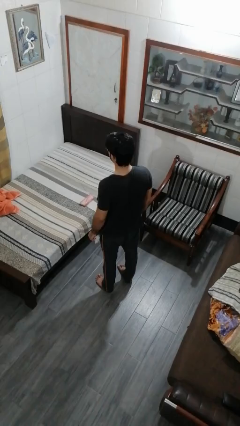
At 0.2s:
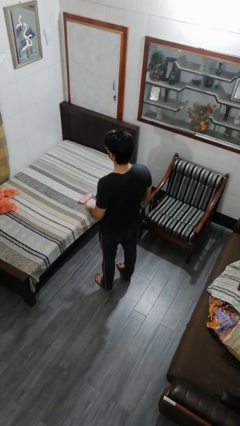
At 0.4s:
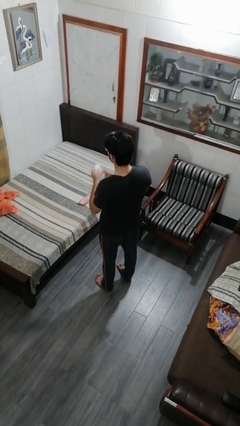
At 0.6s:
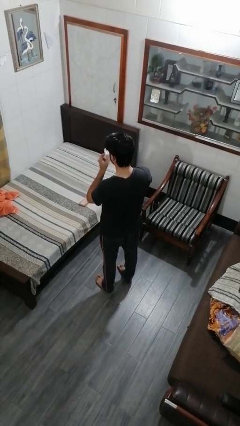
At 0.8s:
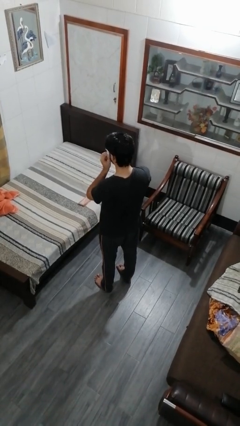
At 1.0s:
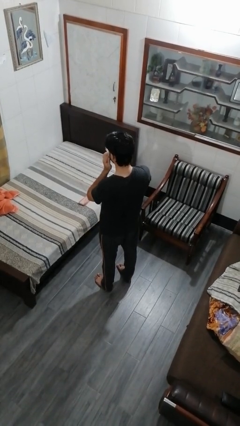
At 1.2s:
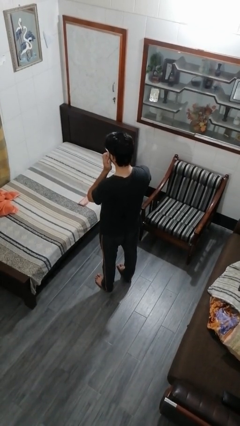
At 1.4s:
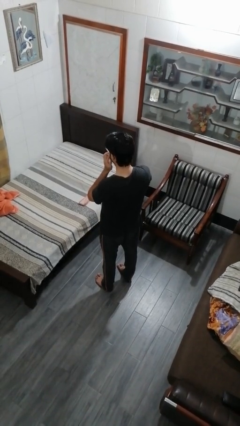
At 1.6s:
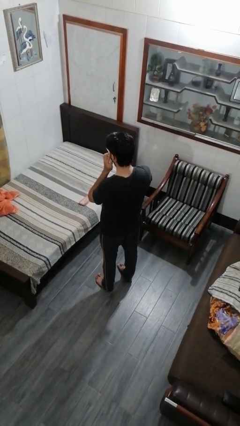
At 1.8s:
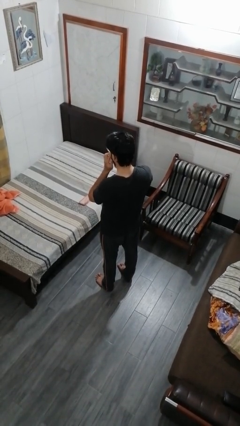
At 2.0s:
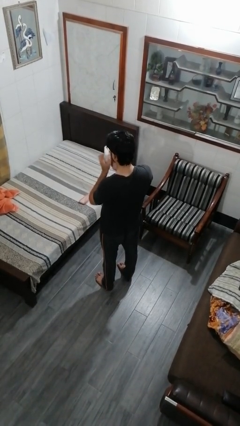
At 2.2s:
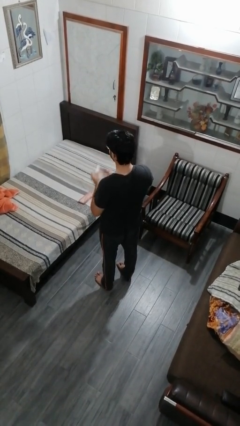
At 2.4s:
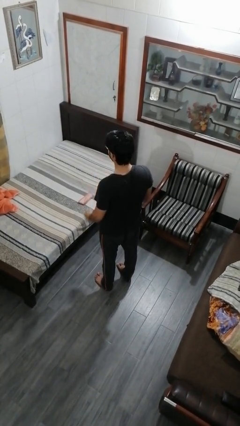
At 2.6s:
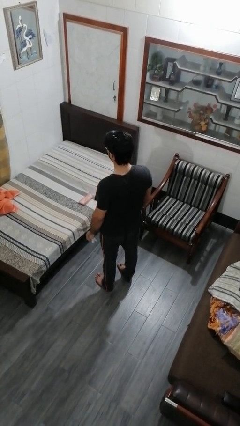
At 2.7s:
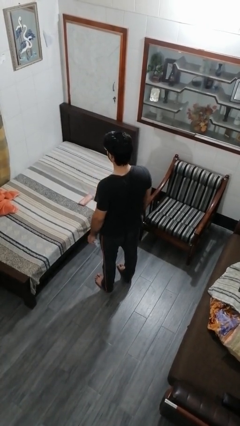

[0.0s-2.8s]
person blows nose

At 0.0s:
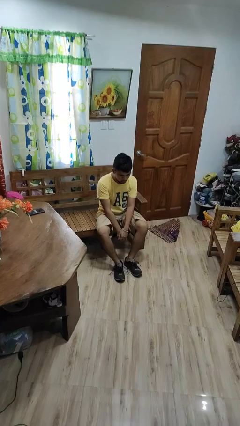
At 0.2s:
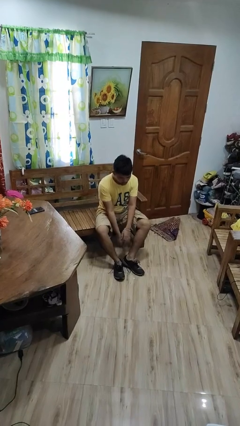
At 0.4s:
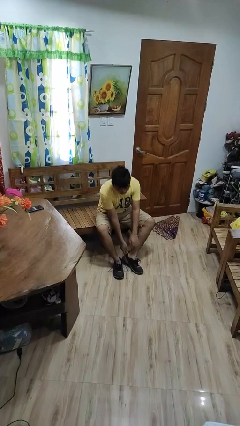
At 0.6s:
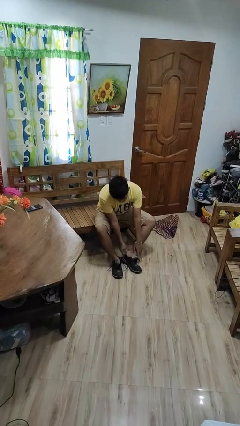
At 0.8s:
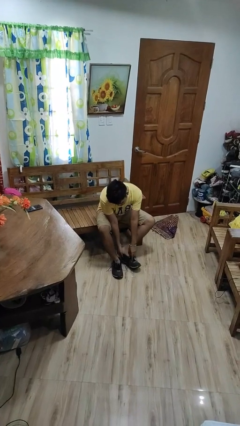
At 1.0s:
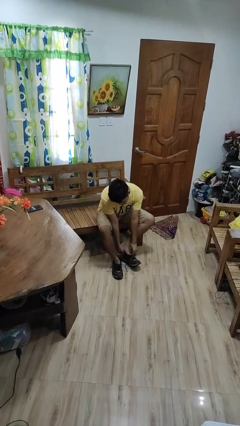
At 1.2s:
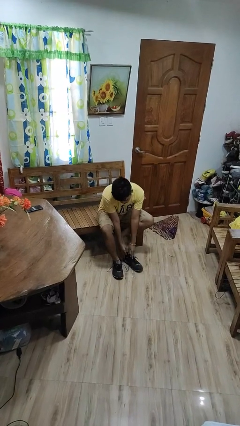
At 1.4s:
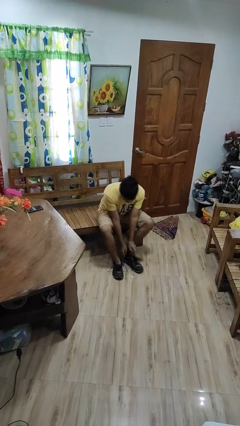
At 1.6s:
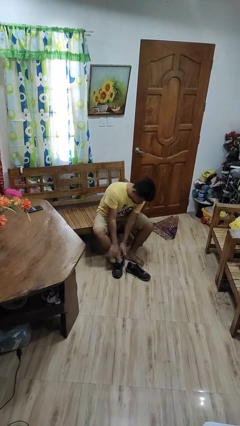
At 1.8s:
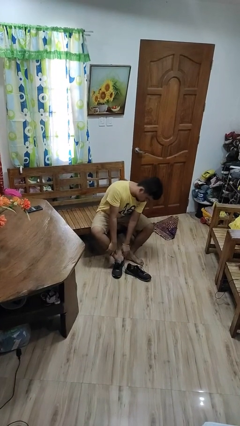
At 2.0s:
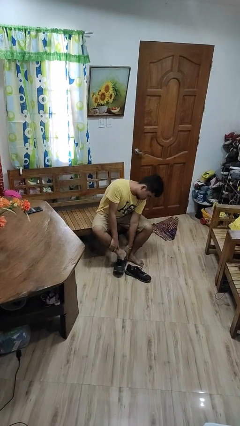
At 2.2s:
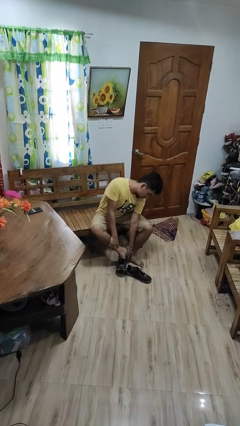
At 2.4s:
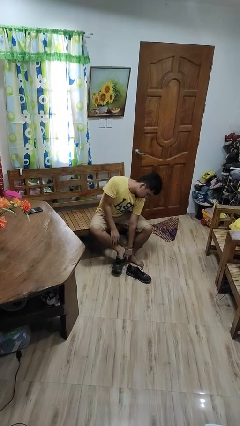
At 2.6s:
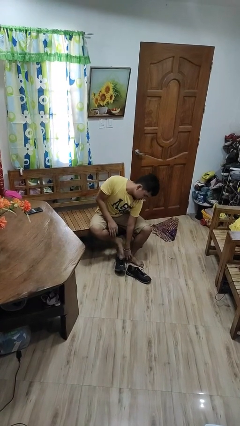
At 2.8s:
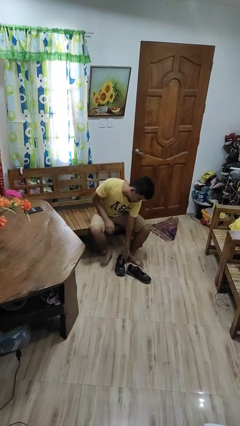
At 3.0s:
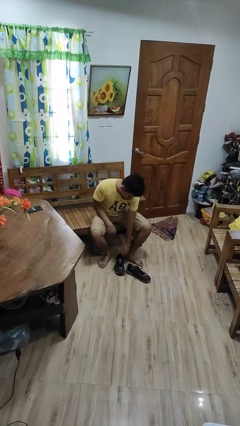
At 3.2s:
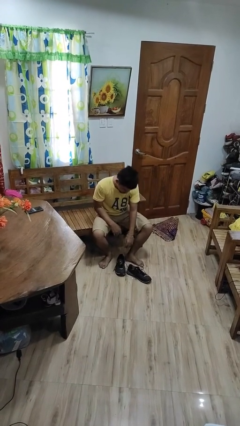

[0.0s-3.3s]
person takes off shoes

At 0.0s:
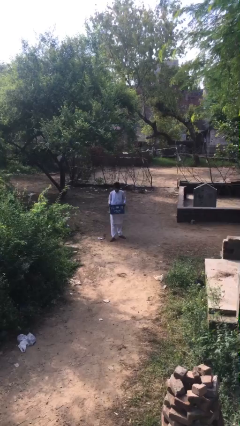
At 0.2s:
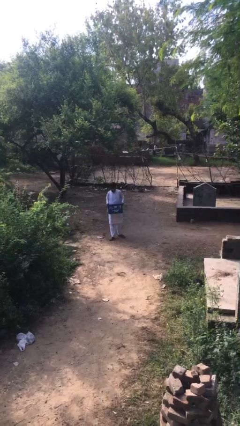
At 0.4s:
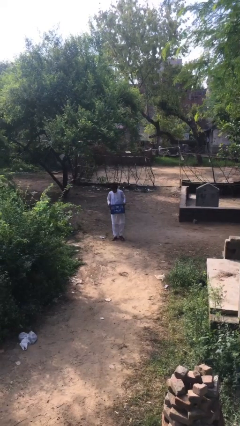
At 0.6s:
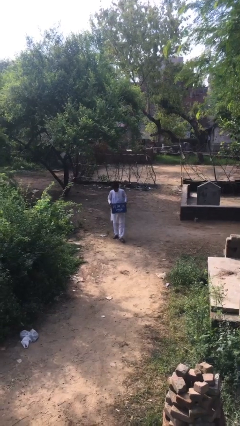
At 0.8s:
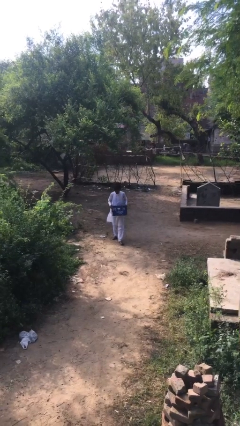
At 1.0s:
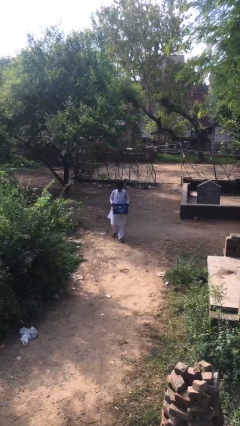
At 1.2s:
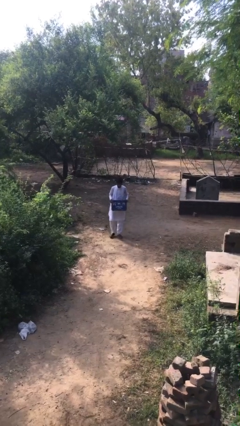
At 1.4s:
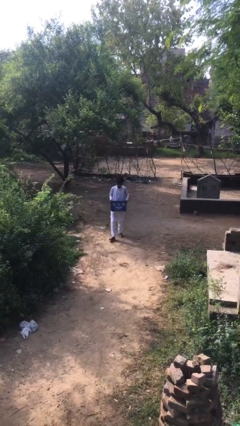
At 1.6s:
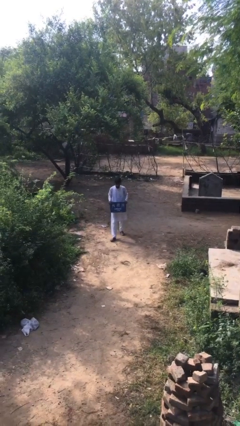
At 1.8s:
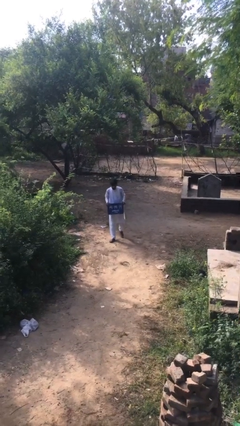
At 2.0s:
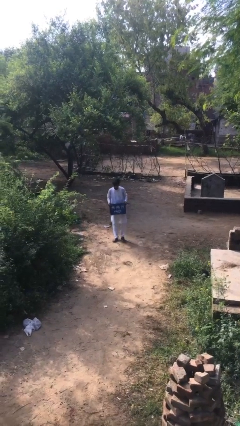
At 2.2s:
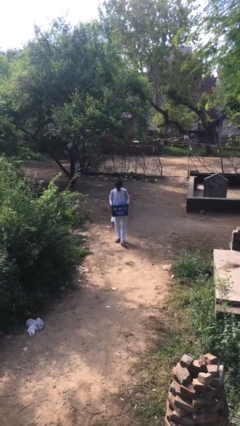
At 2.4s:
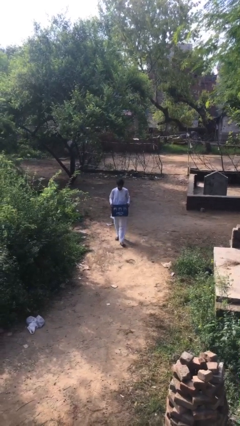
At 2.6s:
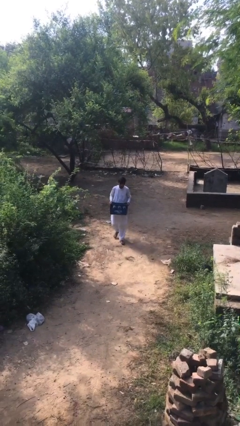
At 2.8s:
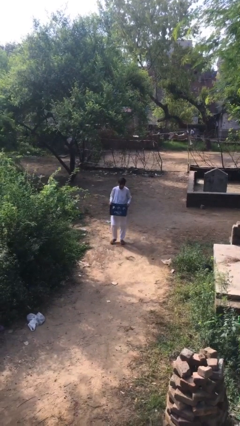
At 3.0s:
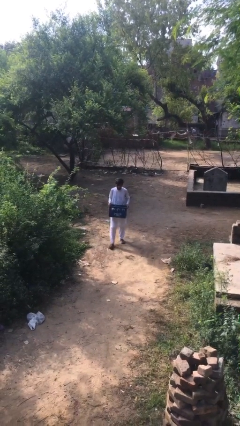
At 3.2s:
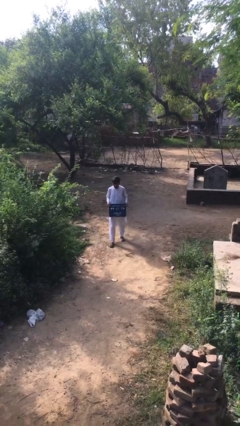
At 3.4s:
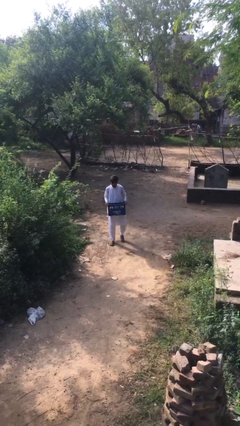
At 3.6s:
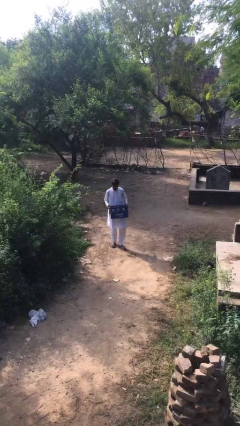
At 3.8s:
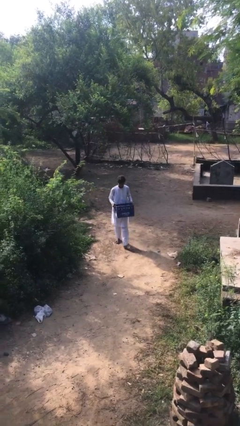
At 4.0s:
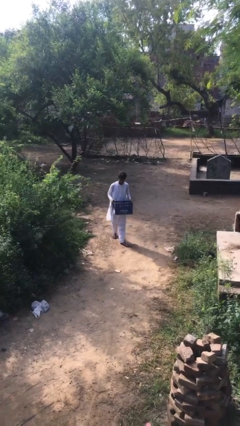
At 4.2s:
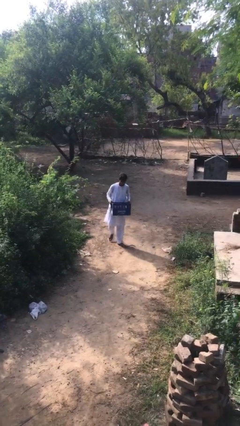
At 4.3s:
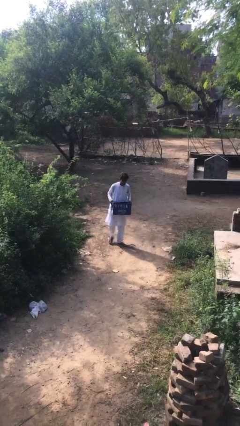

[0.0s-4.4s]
person carries heavy object

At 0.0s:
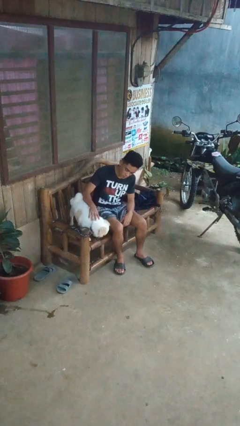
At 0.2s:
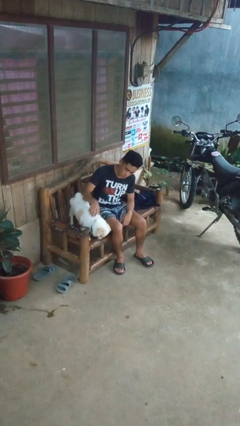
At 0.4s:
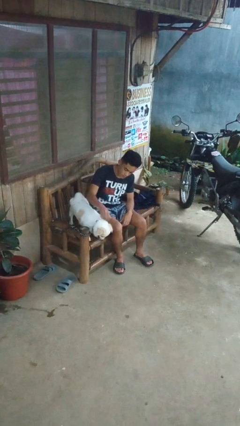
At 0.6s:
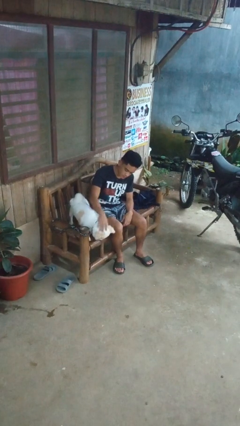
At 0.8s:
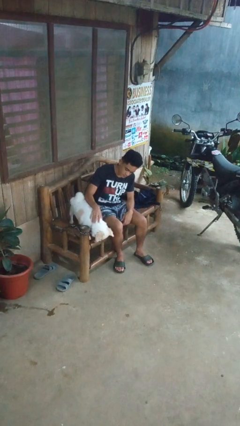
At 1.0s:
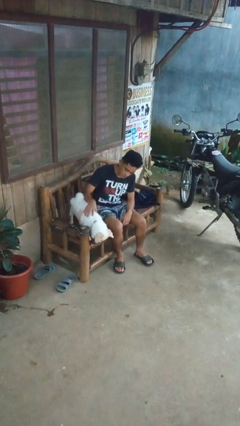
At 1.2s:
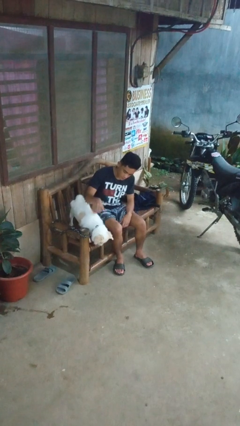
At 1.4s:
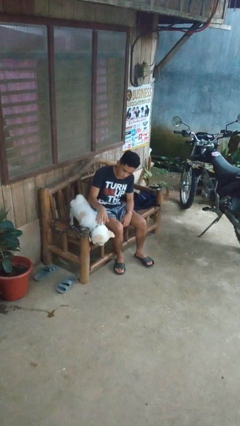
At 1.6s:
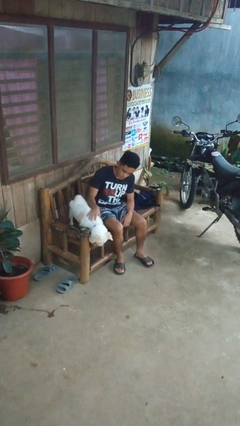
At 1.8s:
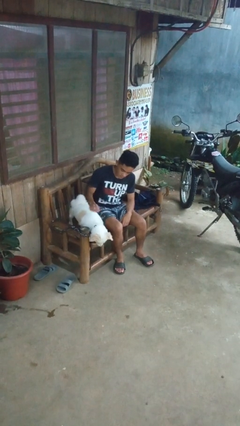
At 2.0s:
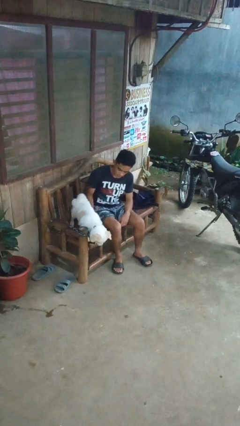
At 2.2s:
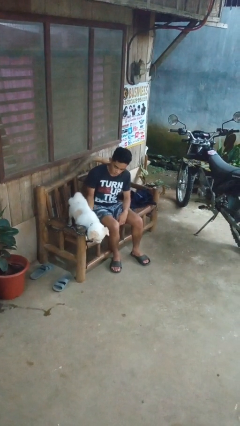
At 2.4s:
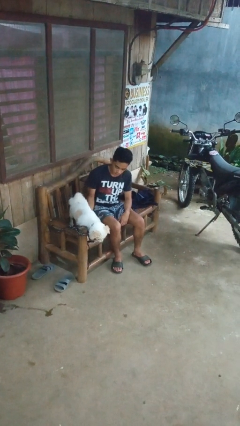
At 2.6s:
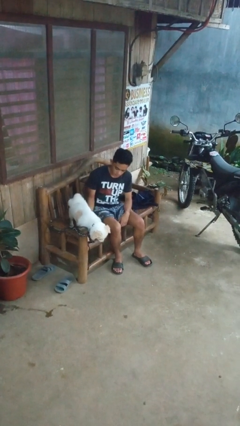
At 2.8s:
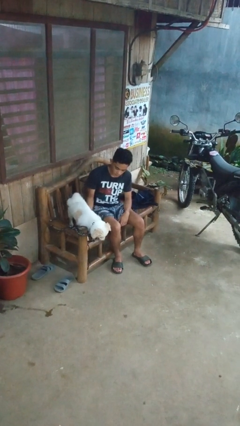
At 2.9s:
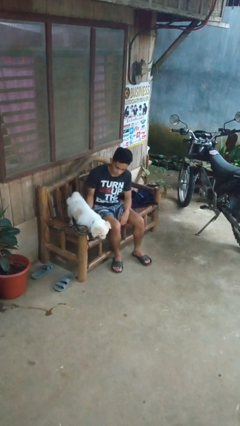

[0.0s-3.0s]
person pets dog

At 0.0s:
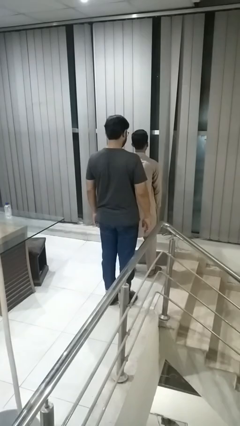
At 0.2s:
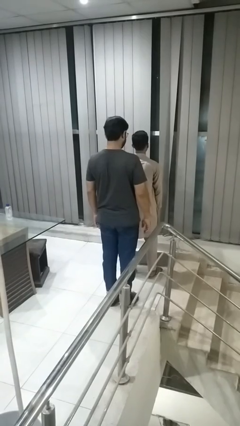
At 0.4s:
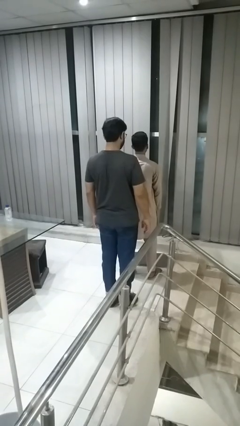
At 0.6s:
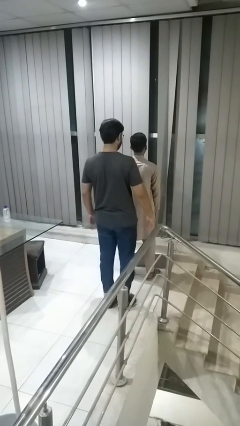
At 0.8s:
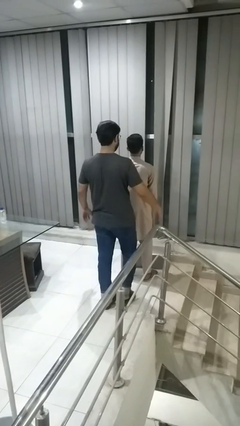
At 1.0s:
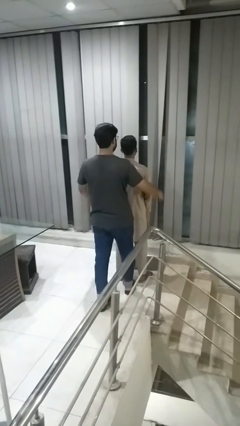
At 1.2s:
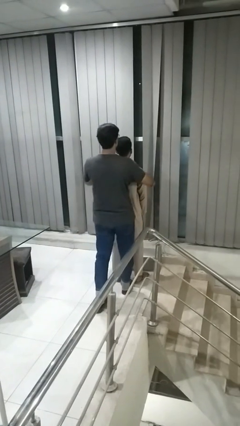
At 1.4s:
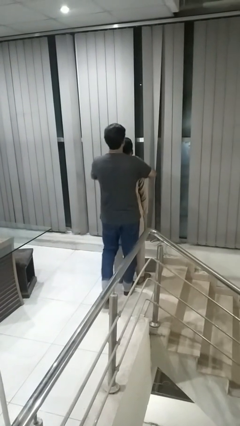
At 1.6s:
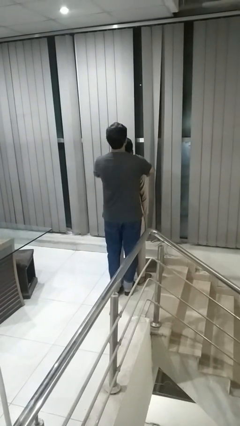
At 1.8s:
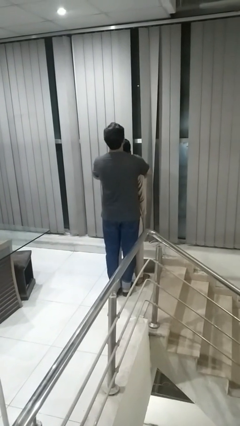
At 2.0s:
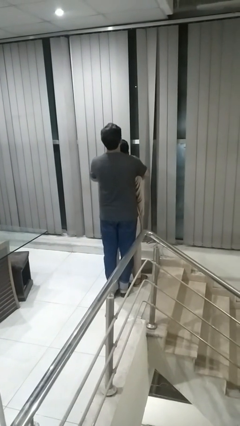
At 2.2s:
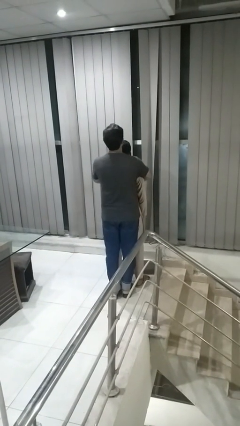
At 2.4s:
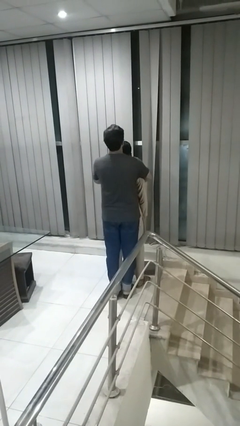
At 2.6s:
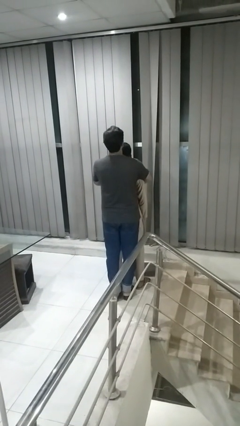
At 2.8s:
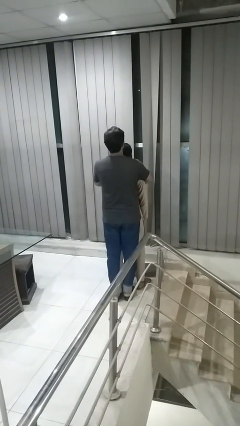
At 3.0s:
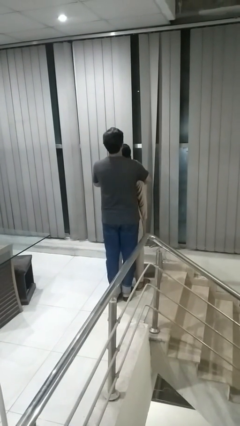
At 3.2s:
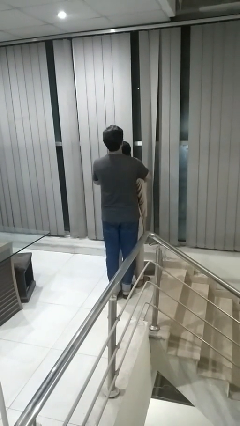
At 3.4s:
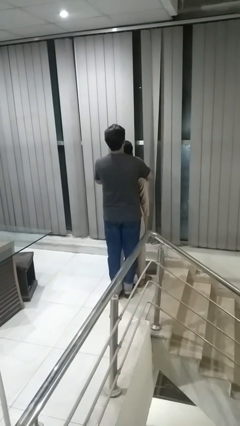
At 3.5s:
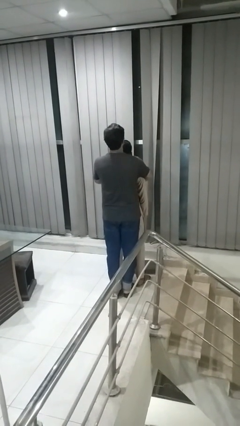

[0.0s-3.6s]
person hugs person from behind

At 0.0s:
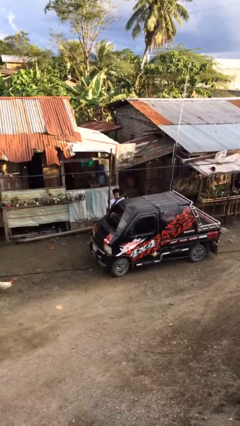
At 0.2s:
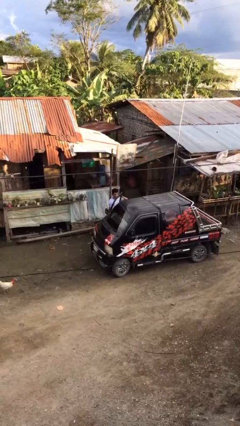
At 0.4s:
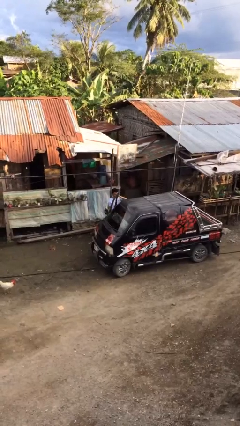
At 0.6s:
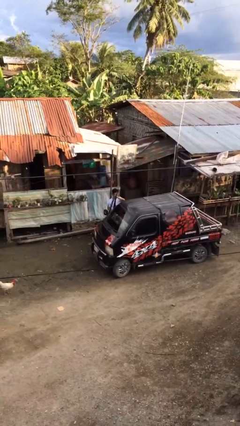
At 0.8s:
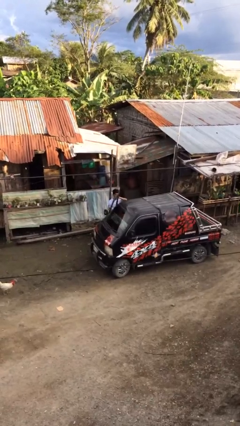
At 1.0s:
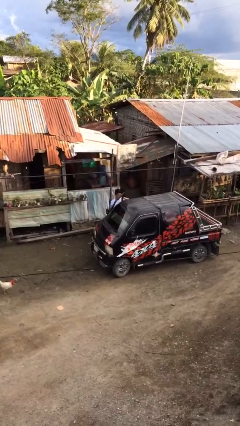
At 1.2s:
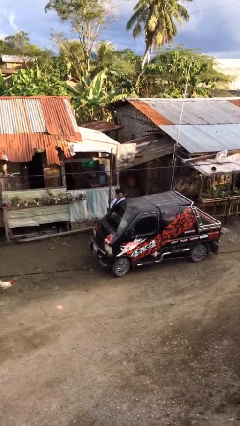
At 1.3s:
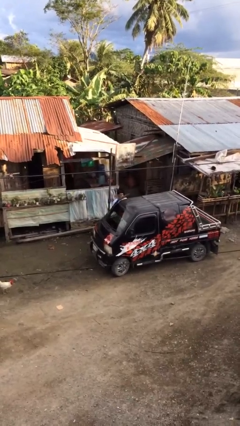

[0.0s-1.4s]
person opens car door
